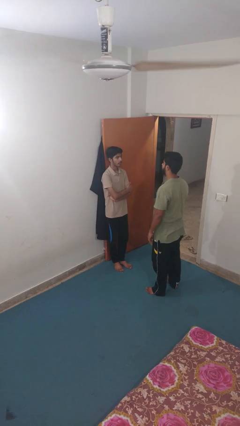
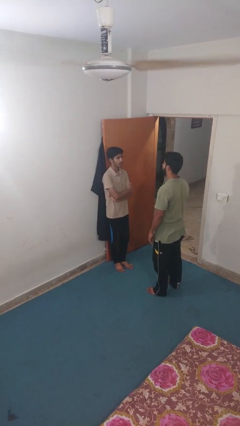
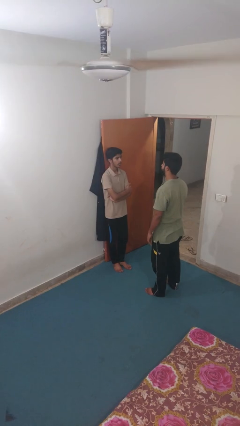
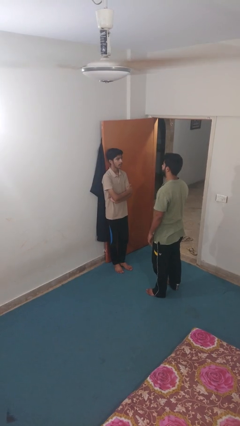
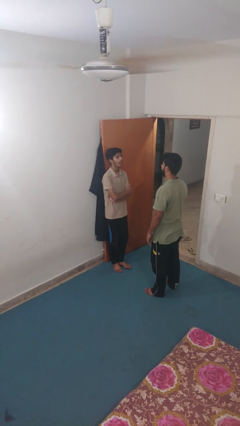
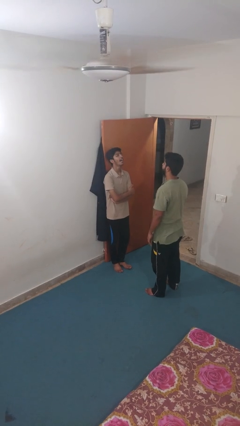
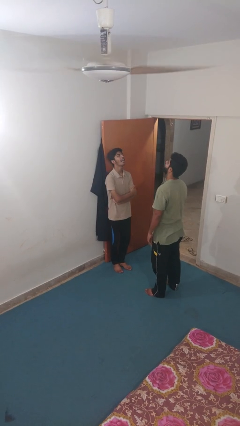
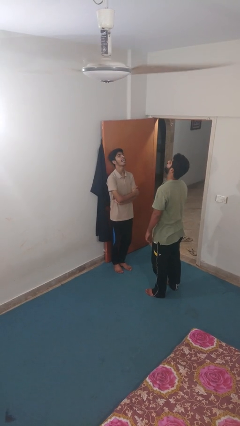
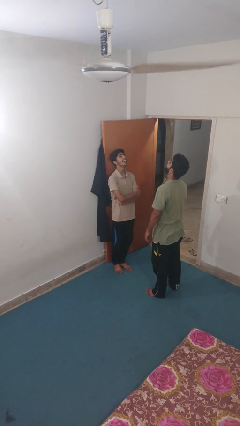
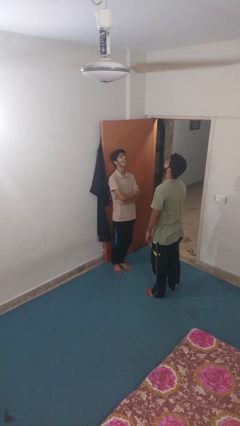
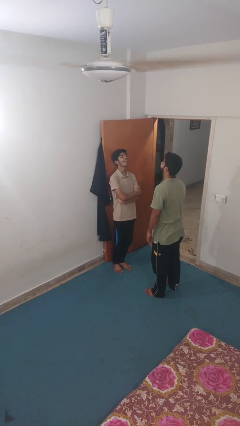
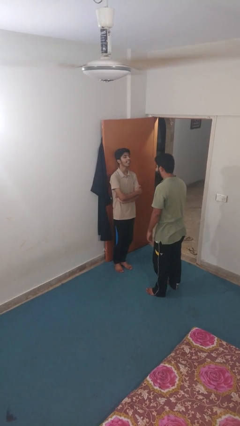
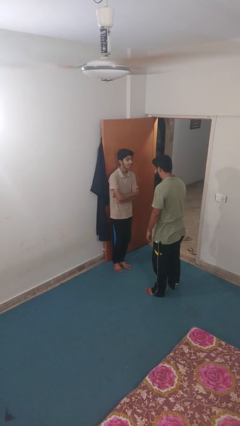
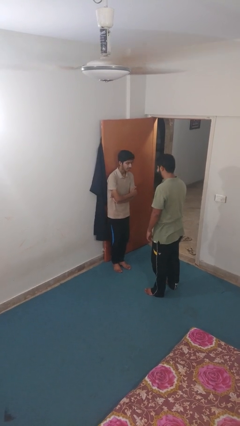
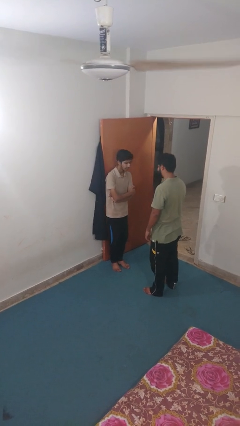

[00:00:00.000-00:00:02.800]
person laughs with person

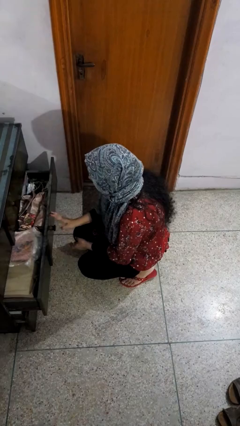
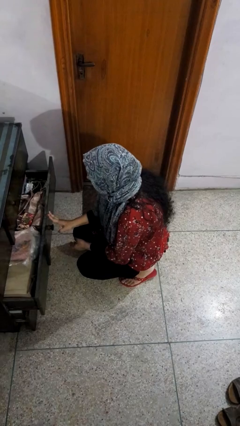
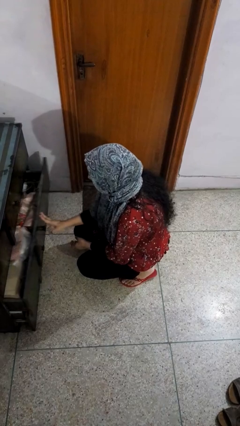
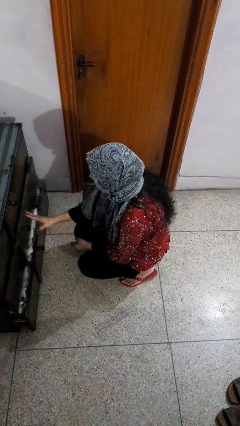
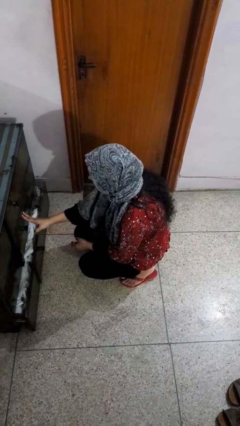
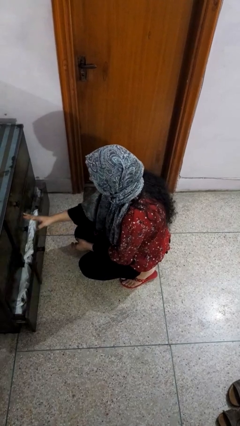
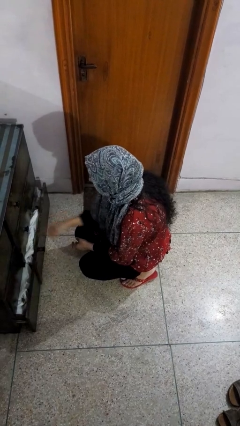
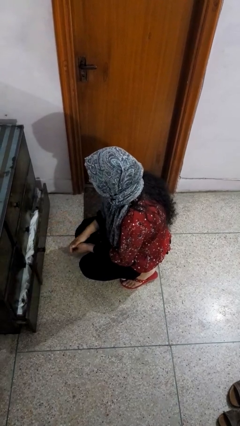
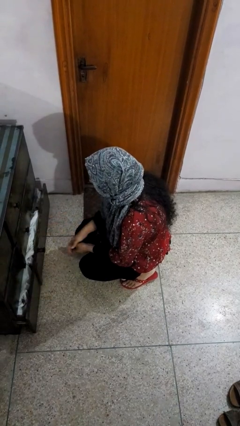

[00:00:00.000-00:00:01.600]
person closes dresser drawer

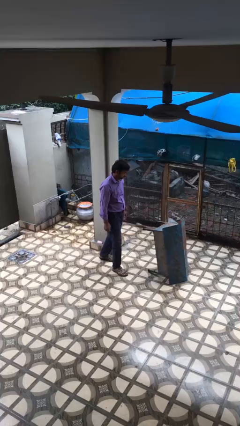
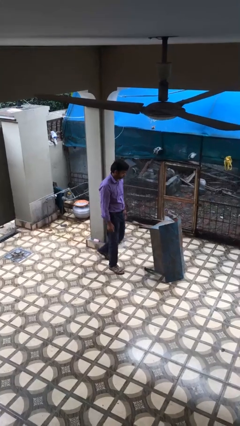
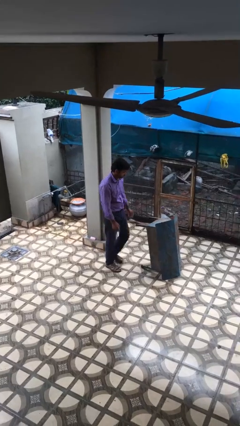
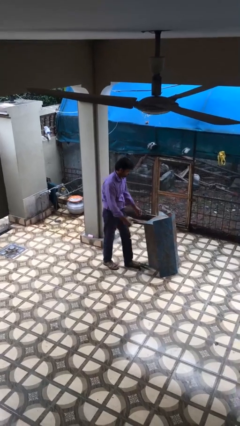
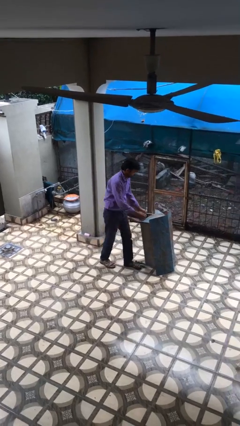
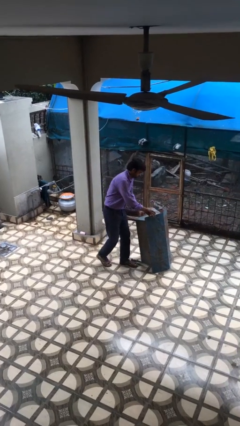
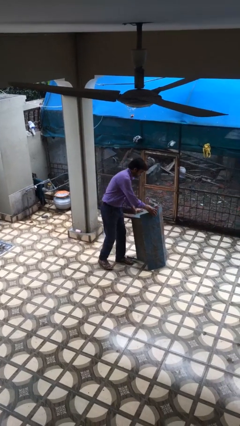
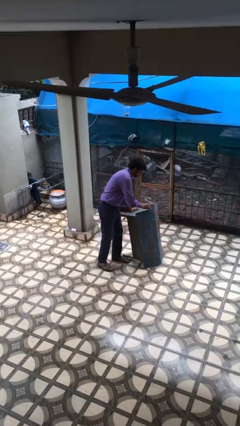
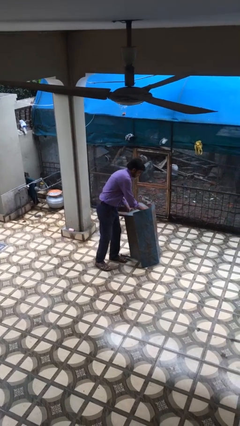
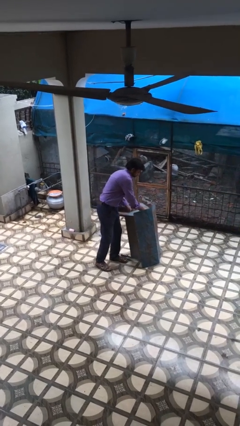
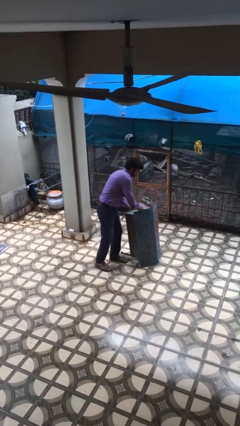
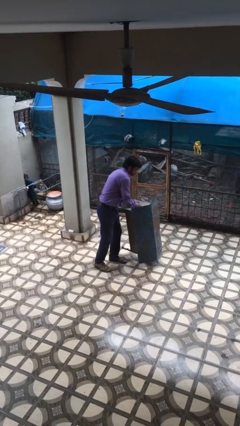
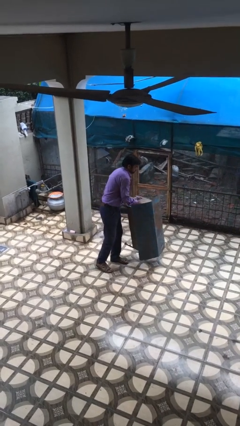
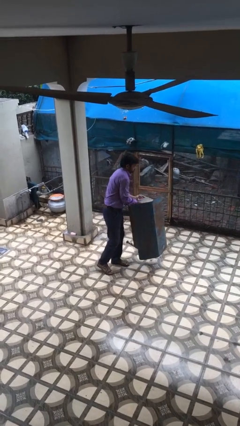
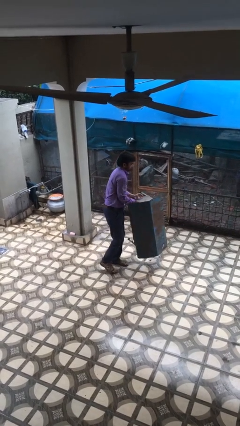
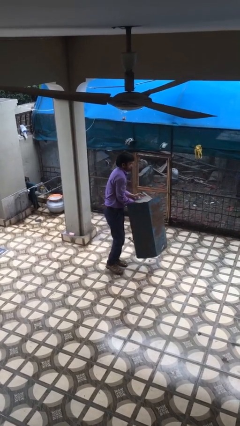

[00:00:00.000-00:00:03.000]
person picks up object from floor

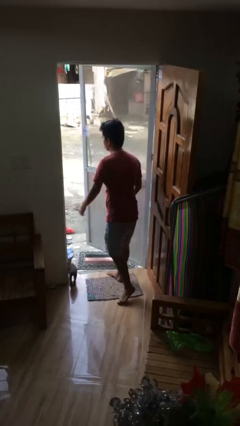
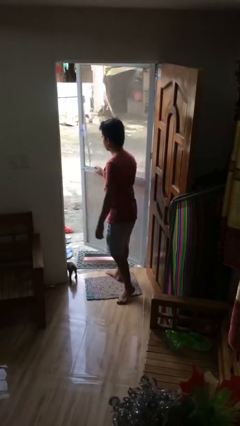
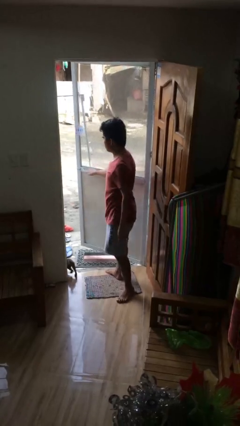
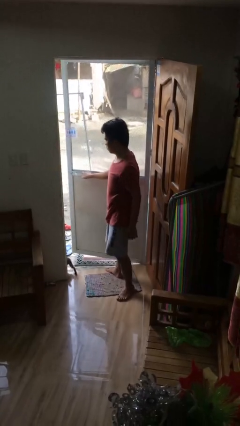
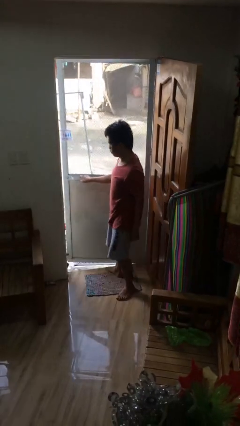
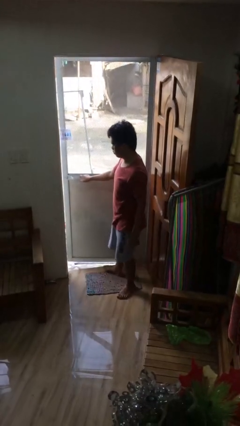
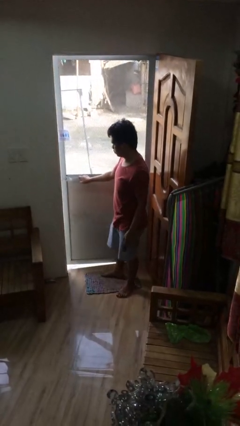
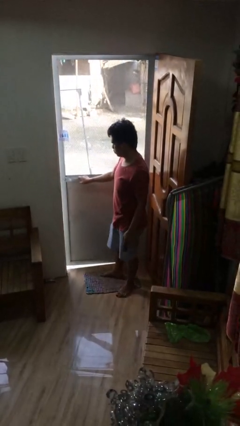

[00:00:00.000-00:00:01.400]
person closes facility door

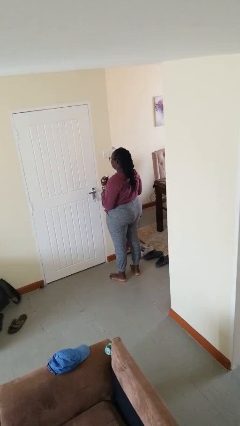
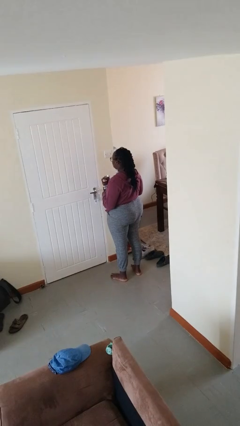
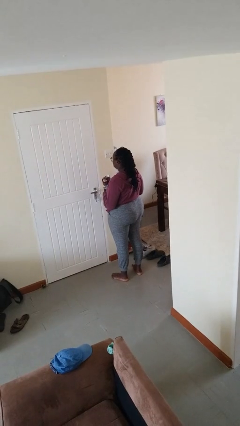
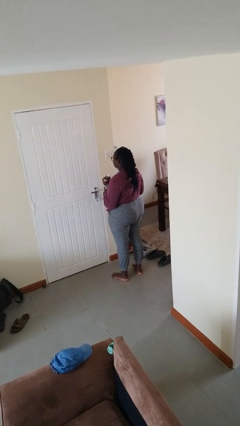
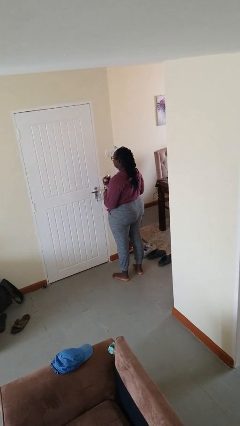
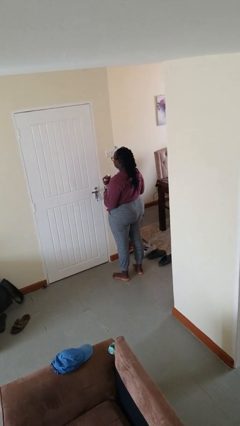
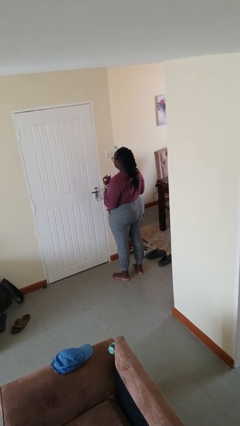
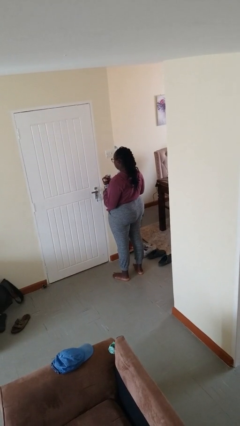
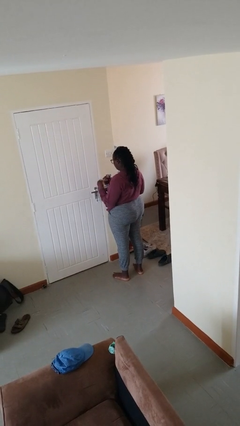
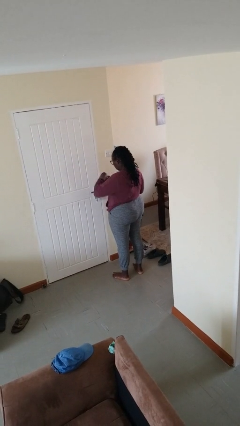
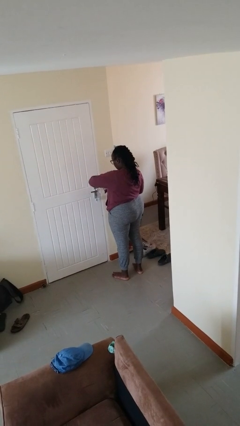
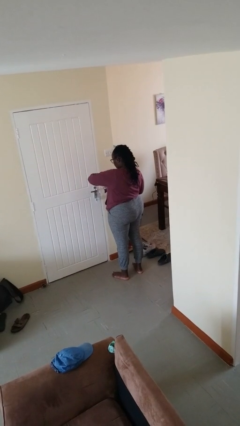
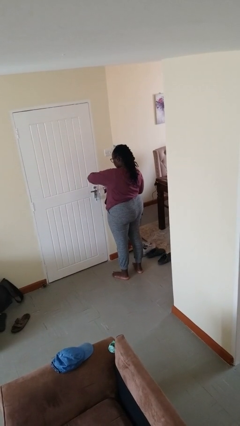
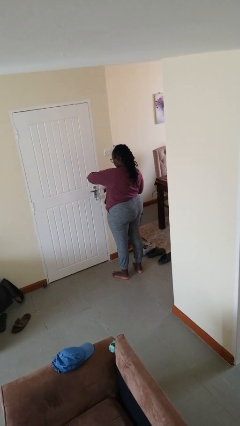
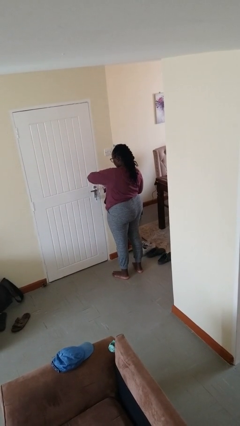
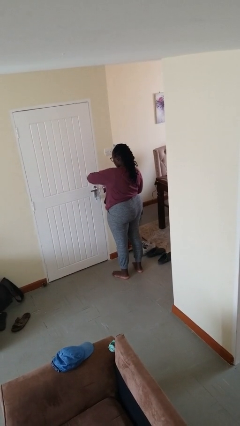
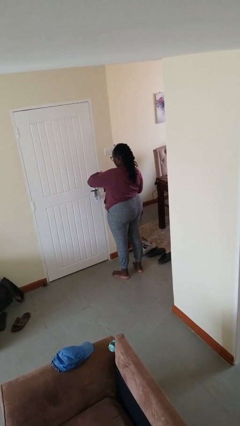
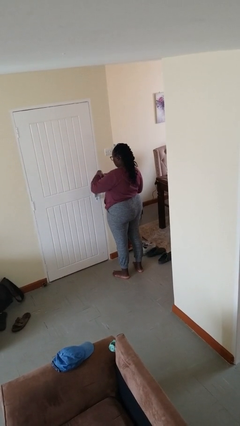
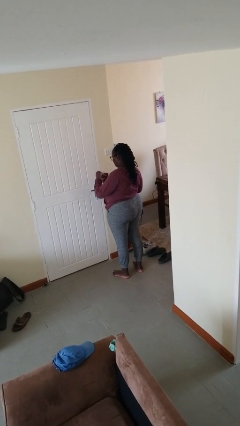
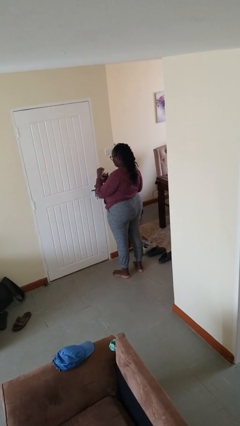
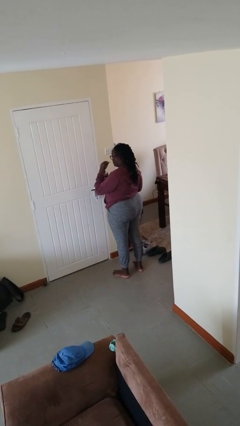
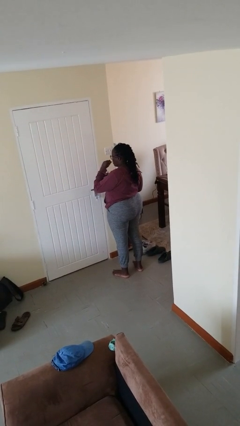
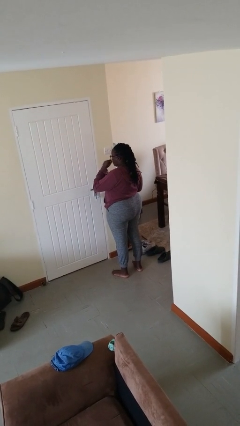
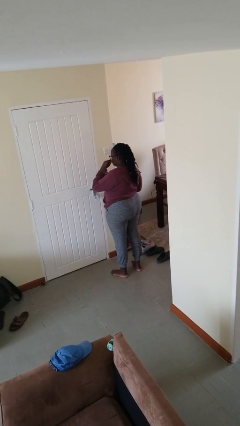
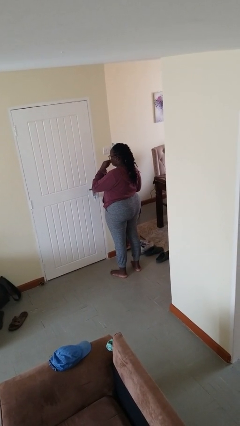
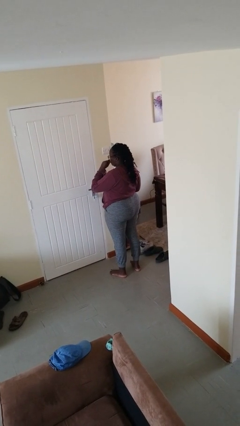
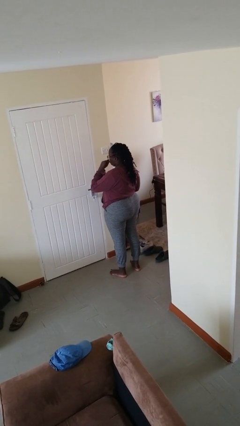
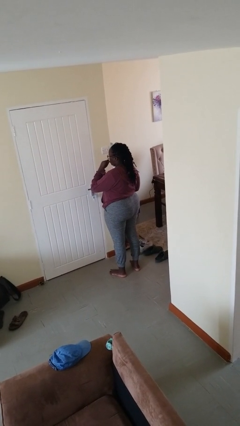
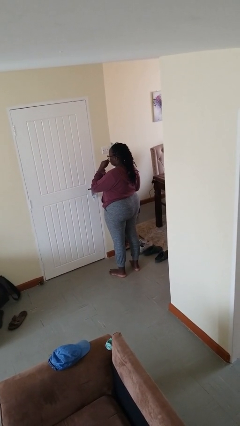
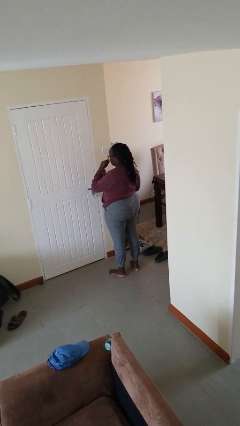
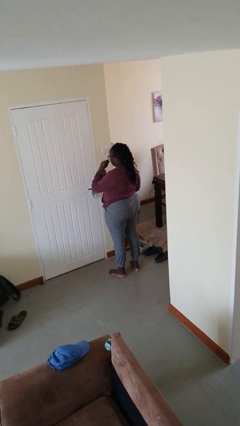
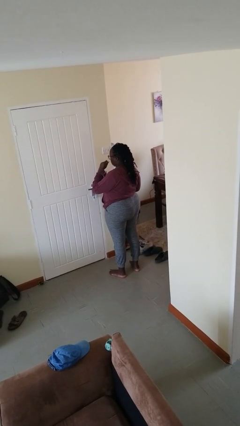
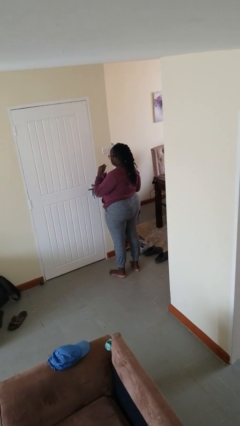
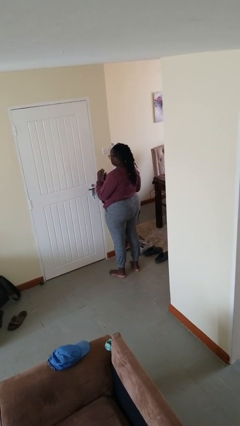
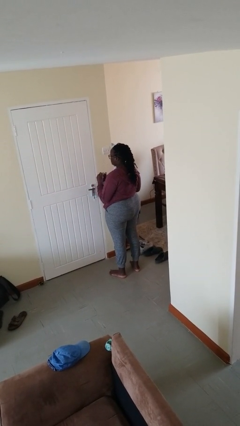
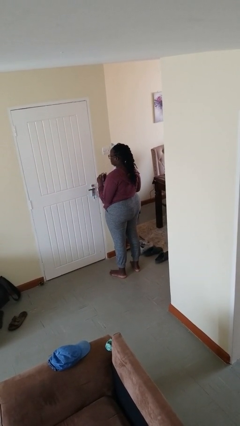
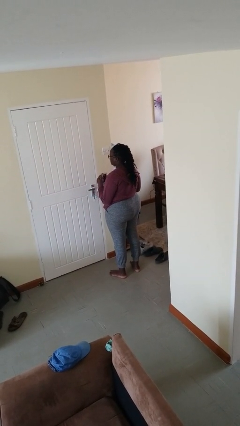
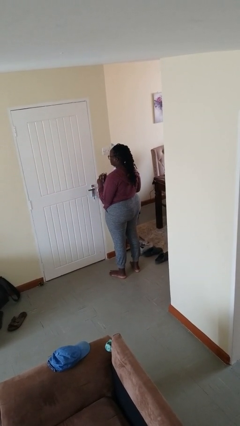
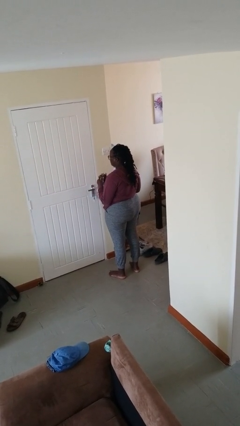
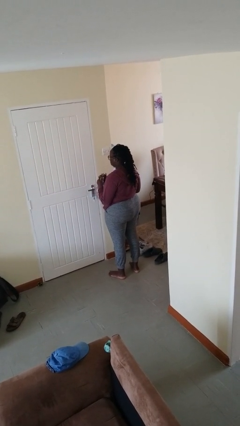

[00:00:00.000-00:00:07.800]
person eats snack from bag

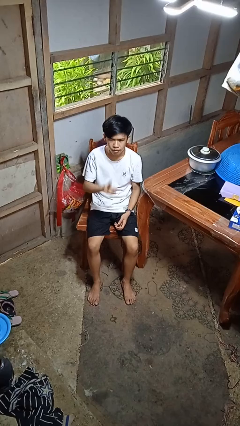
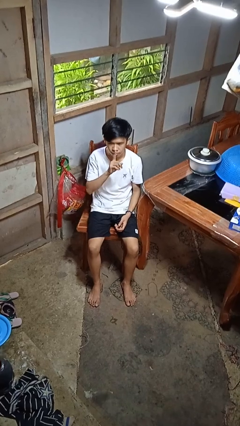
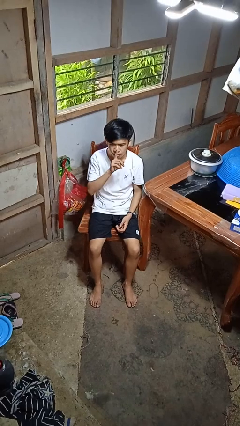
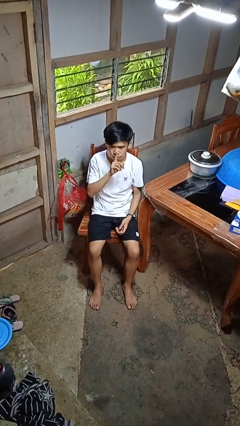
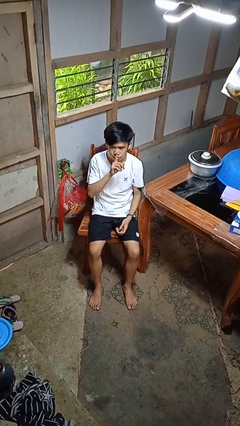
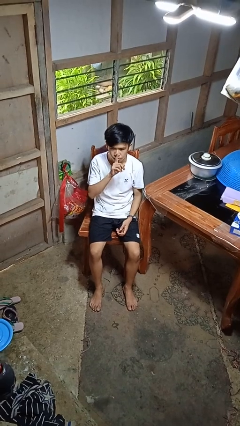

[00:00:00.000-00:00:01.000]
person gestures be quiet
